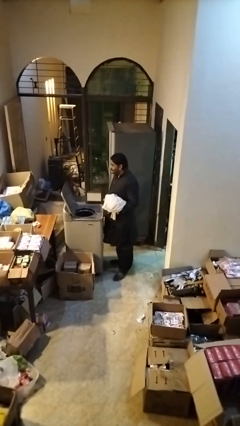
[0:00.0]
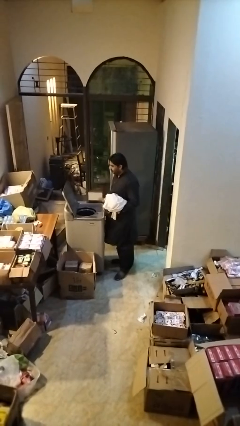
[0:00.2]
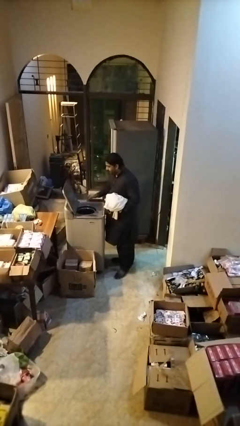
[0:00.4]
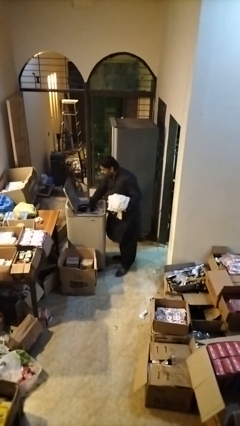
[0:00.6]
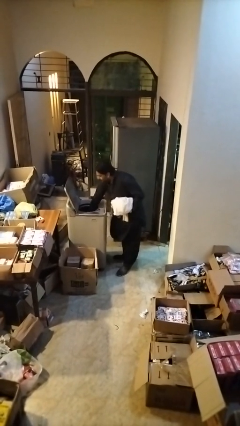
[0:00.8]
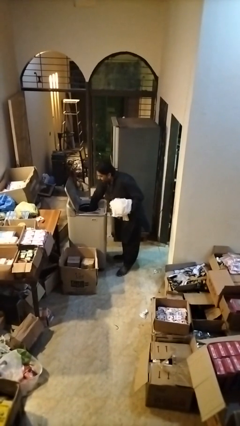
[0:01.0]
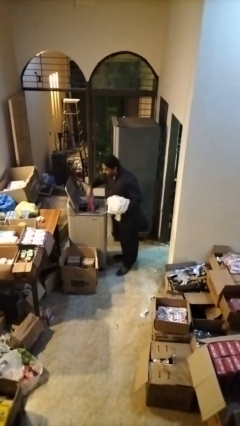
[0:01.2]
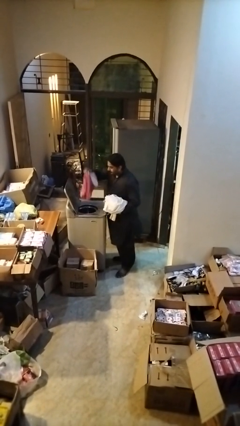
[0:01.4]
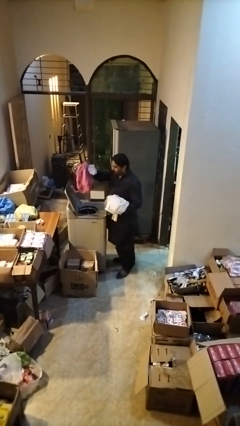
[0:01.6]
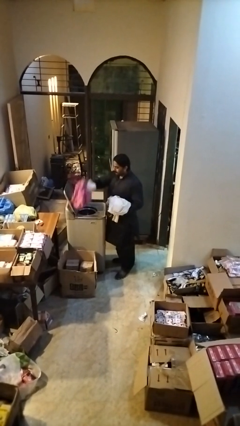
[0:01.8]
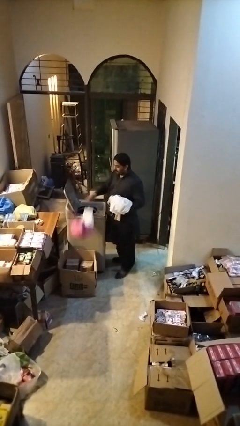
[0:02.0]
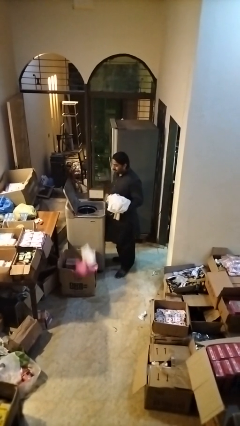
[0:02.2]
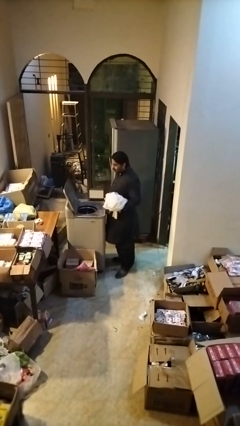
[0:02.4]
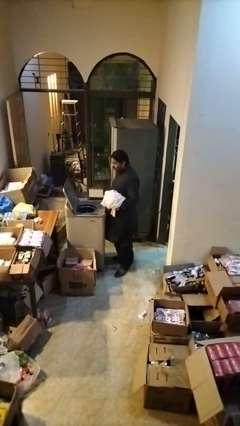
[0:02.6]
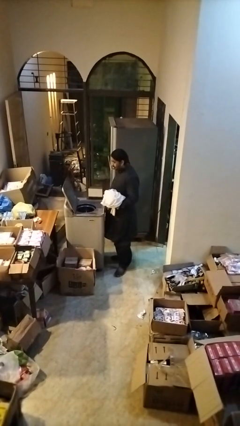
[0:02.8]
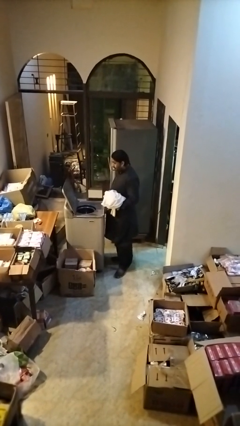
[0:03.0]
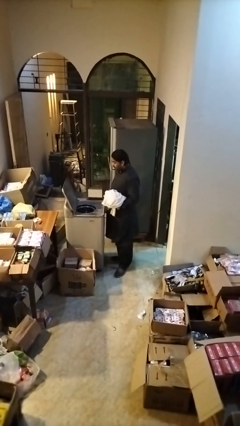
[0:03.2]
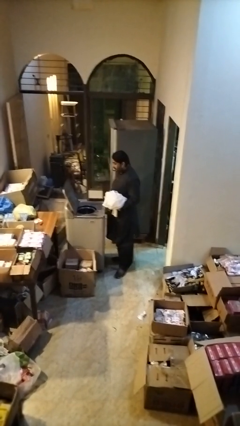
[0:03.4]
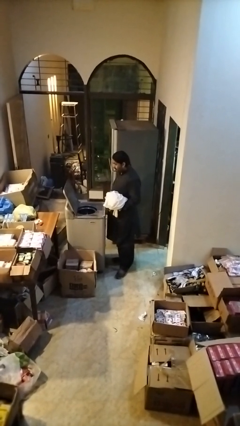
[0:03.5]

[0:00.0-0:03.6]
person unloads dryer

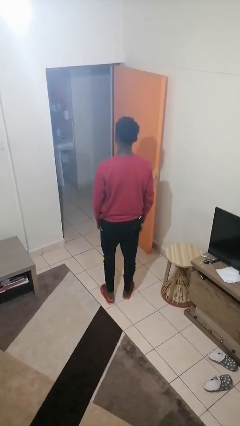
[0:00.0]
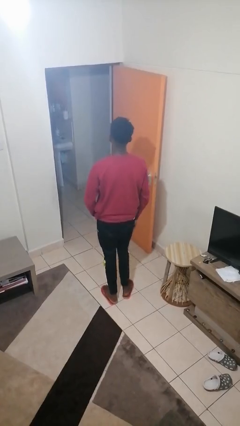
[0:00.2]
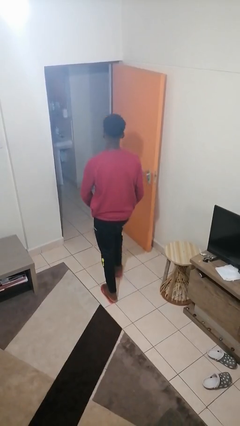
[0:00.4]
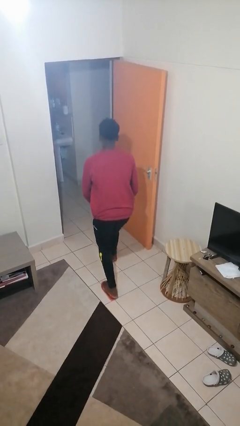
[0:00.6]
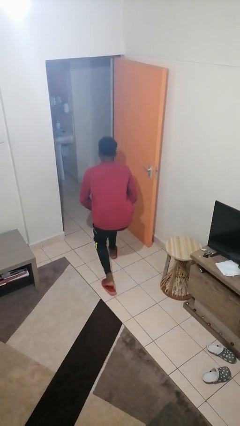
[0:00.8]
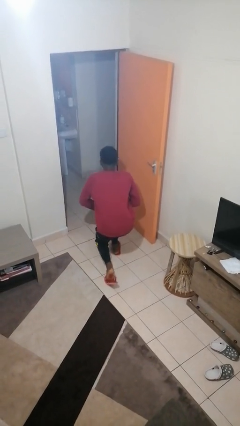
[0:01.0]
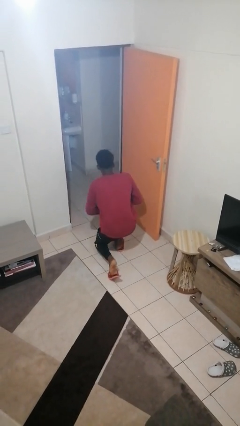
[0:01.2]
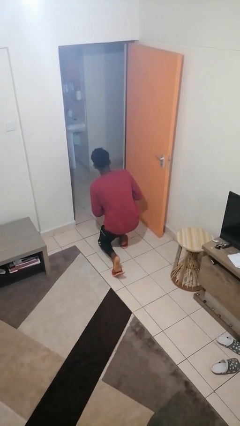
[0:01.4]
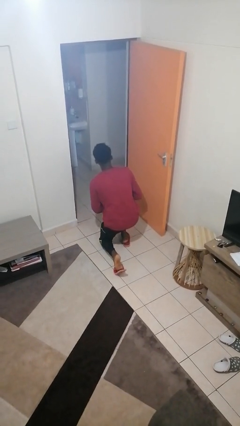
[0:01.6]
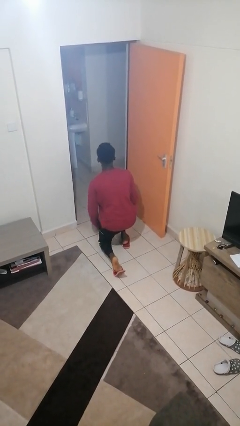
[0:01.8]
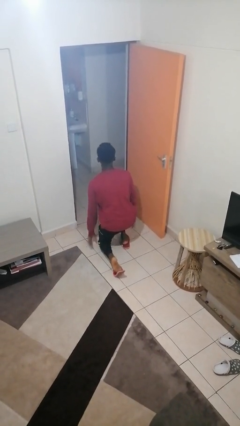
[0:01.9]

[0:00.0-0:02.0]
person kneels

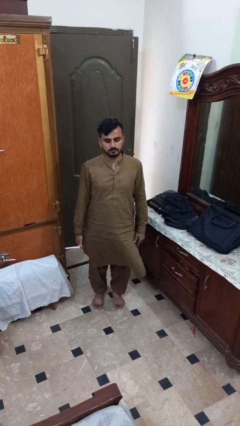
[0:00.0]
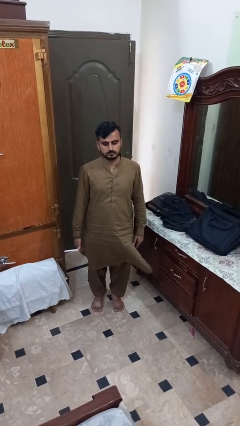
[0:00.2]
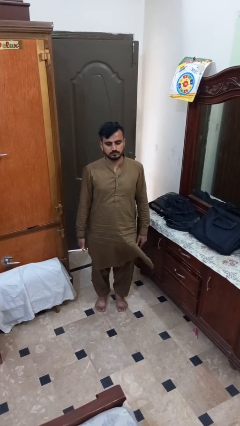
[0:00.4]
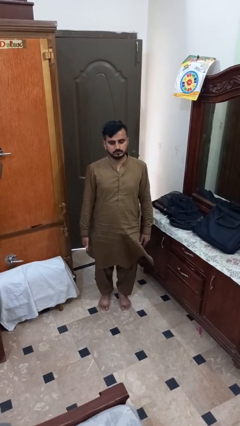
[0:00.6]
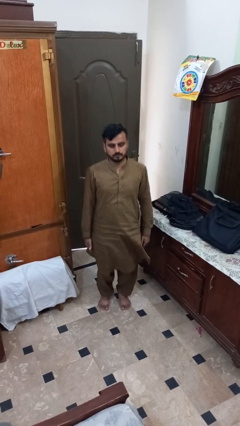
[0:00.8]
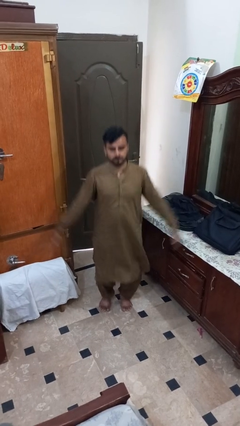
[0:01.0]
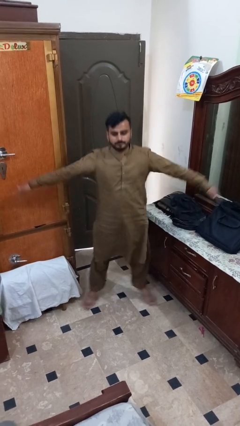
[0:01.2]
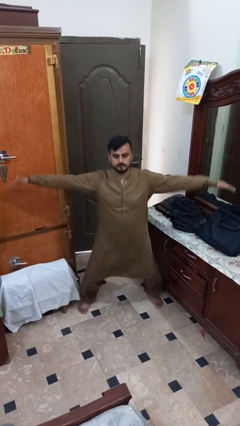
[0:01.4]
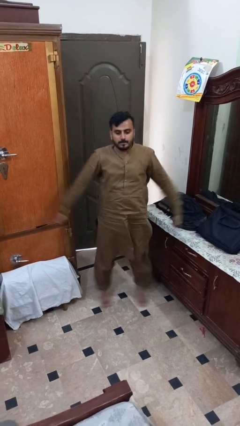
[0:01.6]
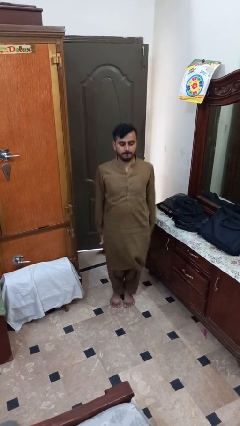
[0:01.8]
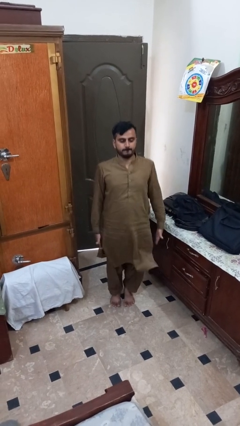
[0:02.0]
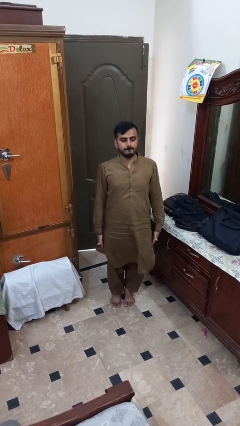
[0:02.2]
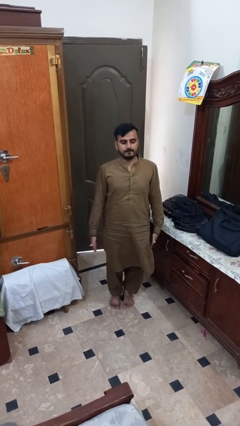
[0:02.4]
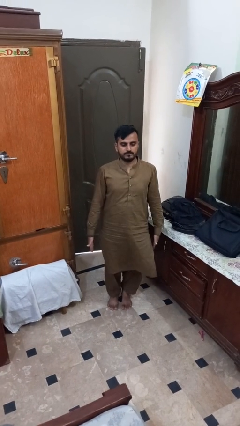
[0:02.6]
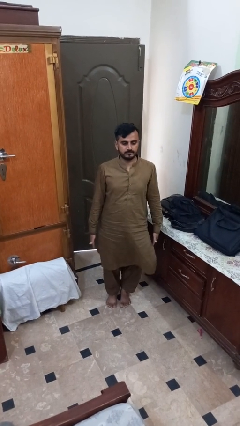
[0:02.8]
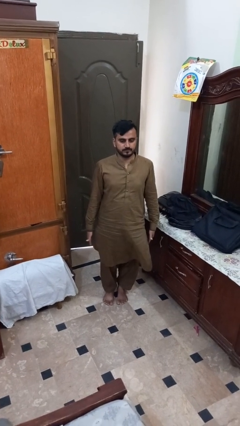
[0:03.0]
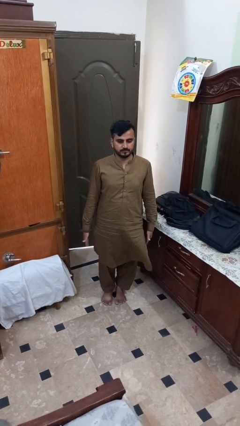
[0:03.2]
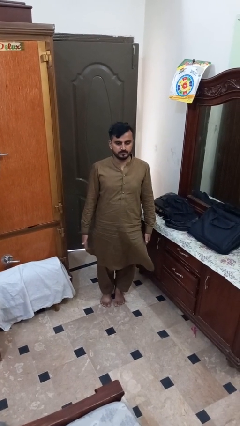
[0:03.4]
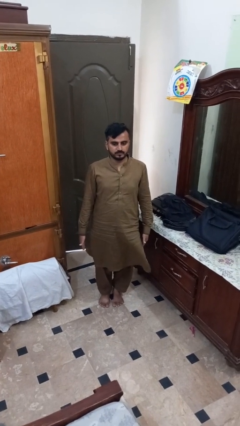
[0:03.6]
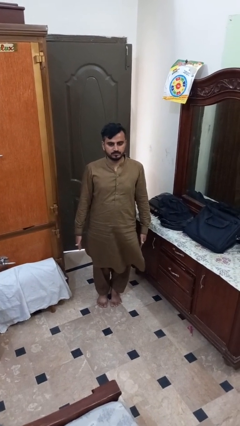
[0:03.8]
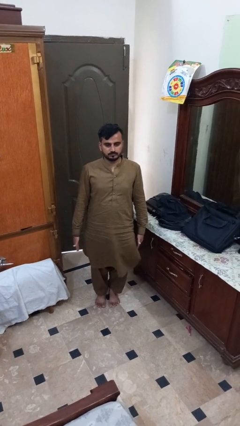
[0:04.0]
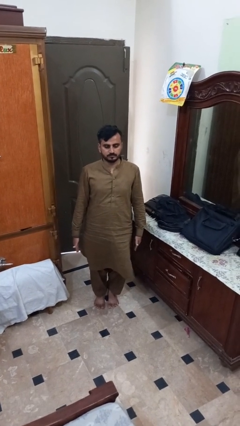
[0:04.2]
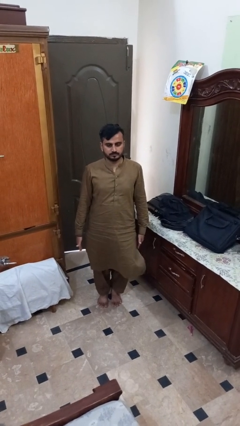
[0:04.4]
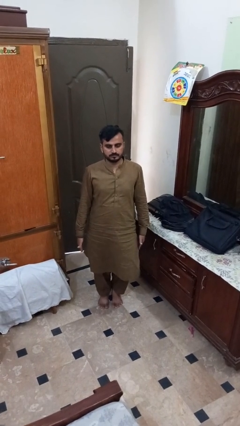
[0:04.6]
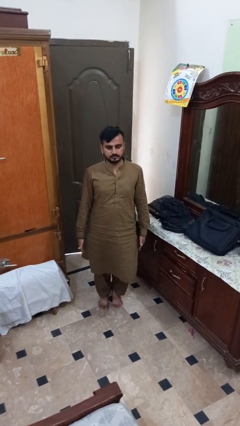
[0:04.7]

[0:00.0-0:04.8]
person exercises with jumping jacks

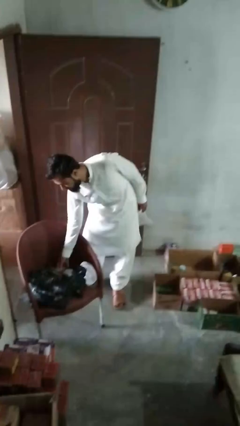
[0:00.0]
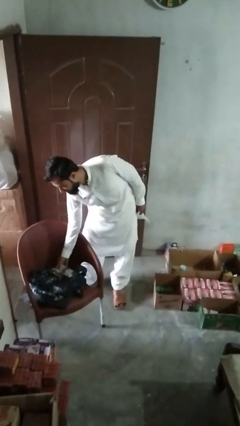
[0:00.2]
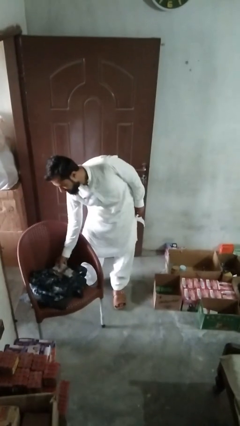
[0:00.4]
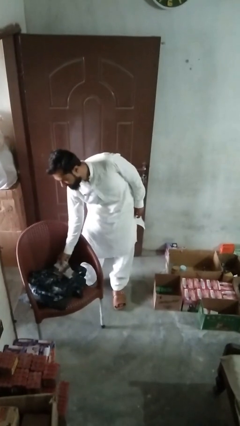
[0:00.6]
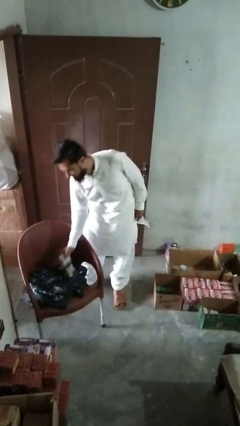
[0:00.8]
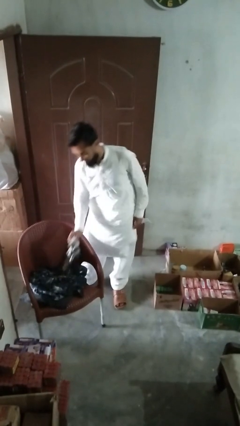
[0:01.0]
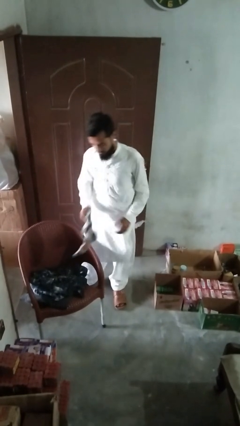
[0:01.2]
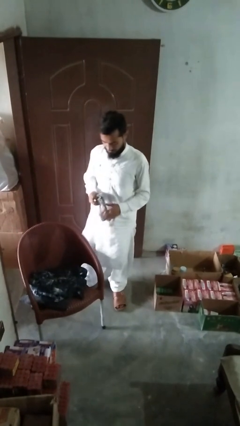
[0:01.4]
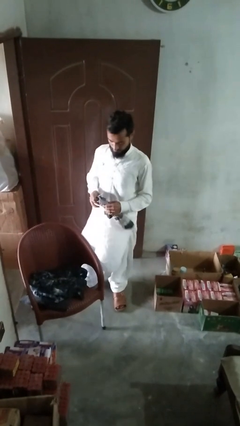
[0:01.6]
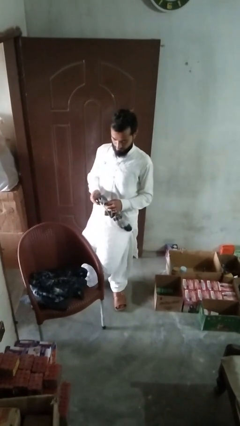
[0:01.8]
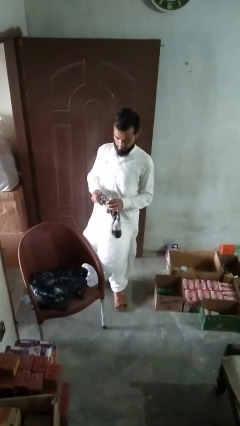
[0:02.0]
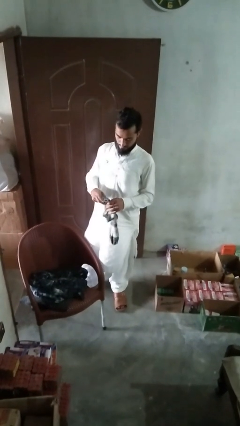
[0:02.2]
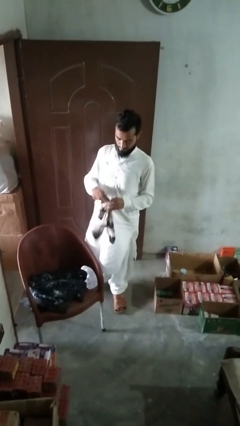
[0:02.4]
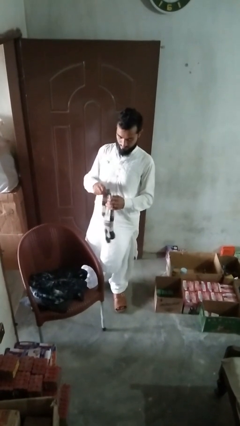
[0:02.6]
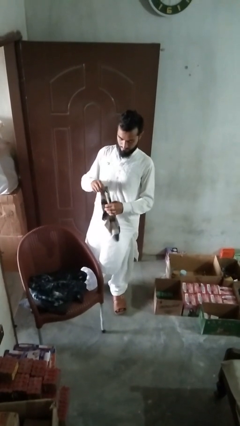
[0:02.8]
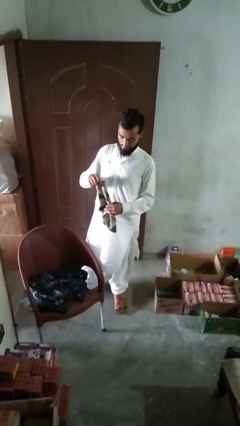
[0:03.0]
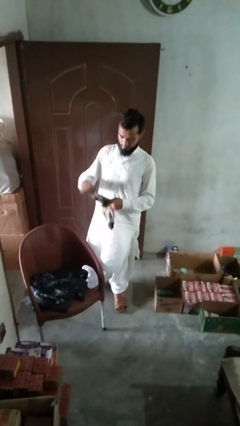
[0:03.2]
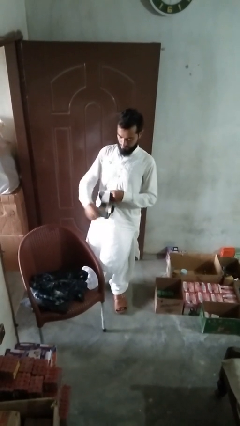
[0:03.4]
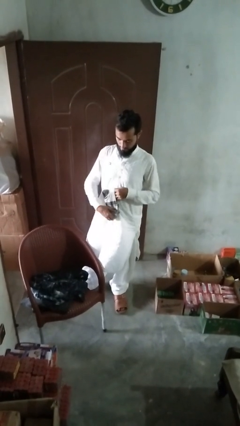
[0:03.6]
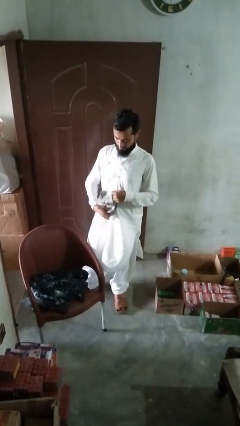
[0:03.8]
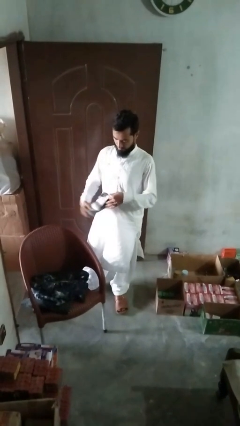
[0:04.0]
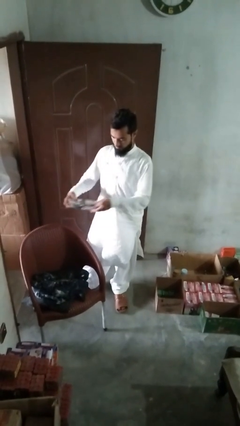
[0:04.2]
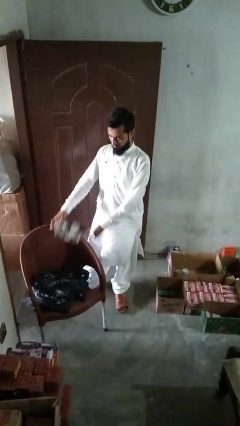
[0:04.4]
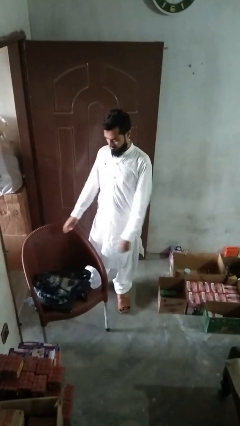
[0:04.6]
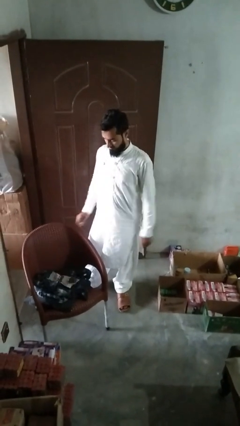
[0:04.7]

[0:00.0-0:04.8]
person folds socks

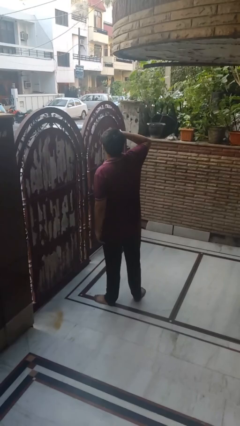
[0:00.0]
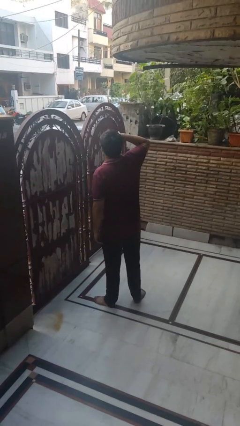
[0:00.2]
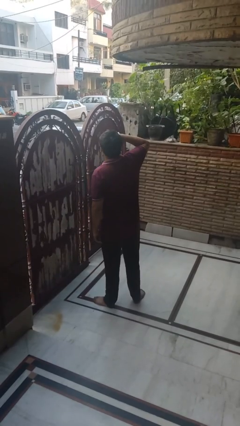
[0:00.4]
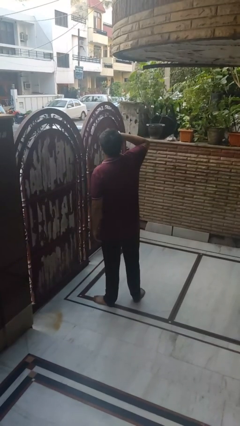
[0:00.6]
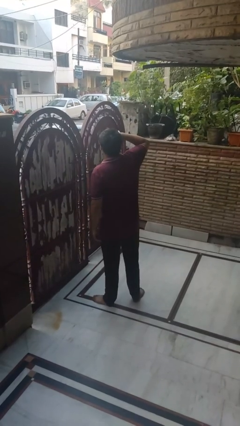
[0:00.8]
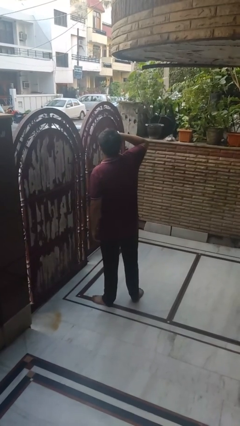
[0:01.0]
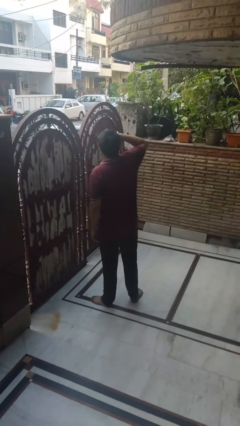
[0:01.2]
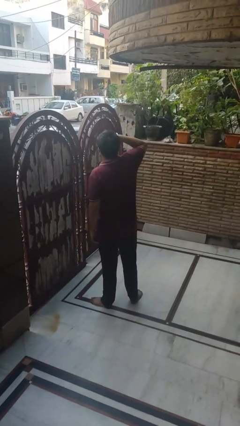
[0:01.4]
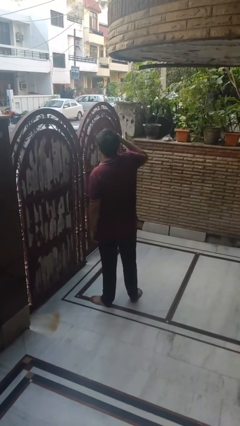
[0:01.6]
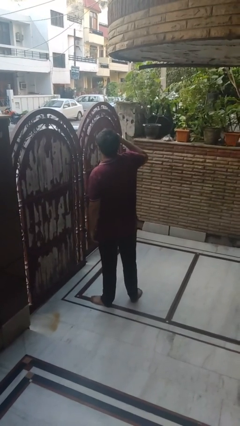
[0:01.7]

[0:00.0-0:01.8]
person shades eyes

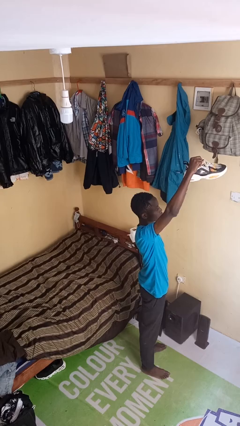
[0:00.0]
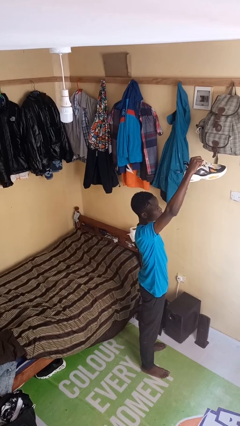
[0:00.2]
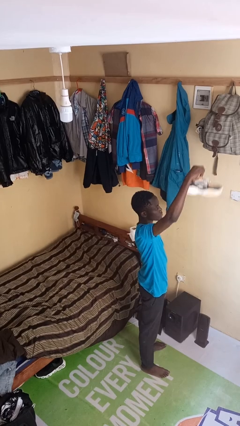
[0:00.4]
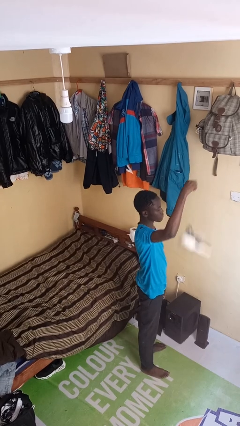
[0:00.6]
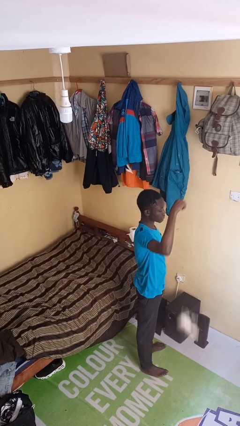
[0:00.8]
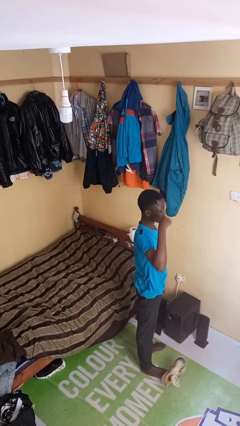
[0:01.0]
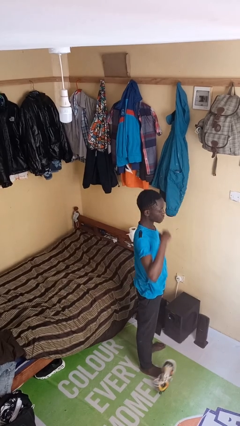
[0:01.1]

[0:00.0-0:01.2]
person drops object
